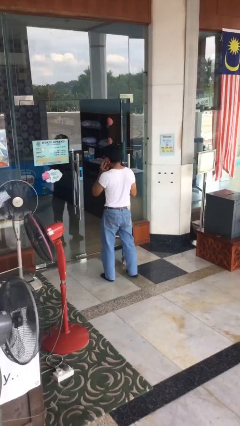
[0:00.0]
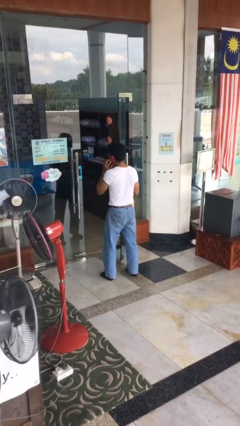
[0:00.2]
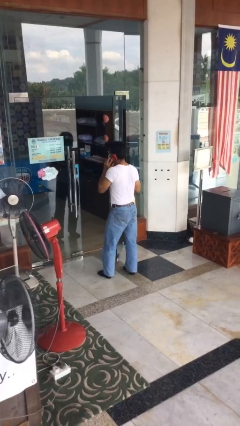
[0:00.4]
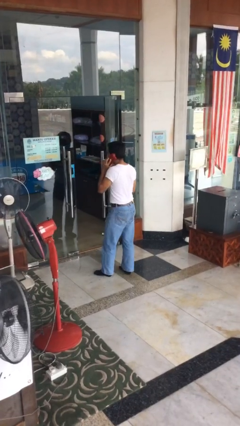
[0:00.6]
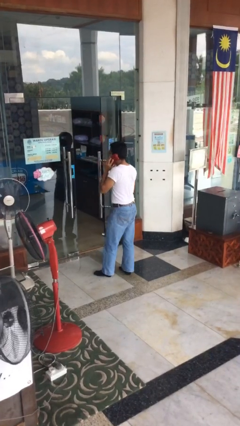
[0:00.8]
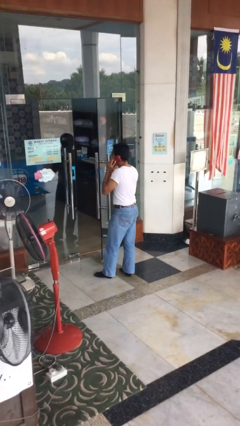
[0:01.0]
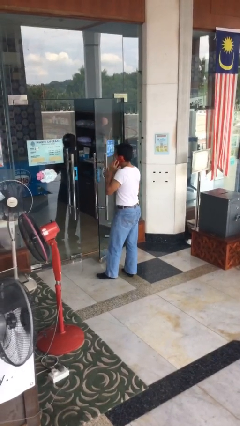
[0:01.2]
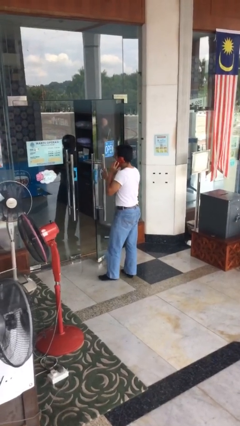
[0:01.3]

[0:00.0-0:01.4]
person closes facility door

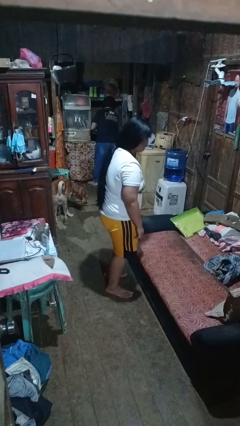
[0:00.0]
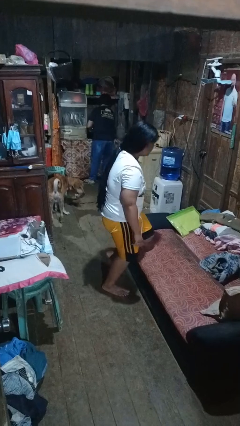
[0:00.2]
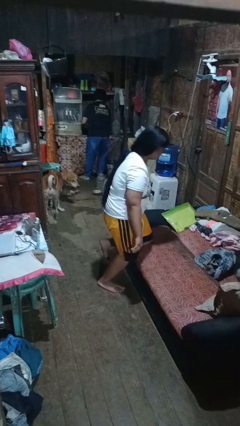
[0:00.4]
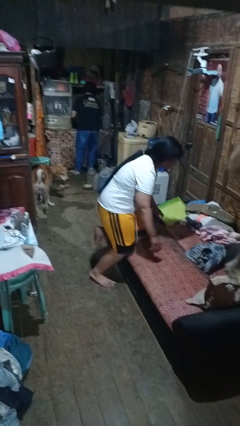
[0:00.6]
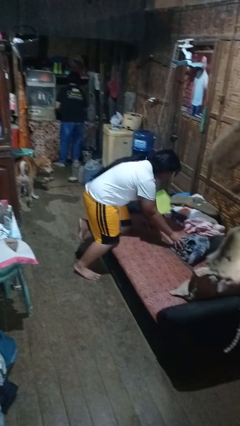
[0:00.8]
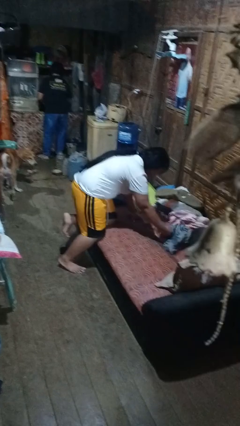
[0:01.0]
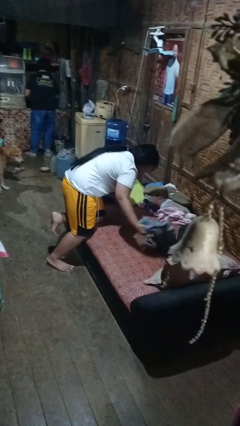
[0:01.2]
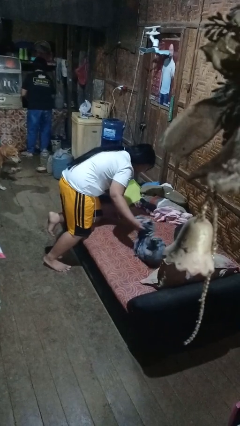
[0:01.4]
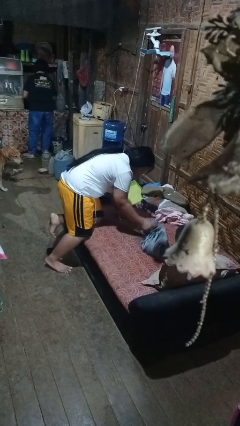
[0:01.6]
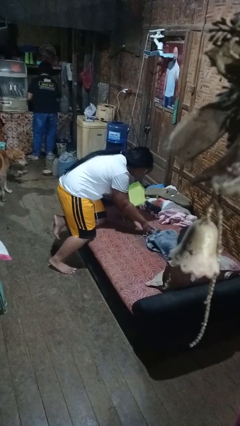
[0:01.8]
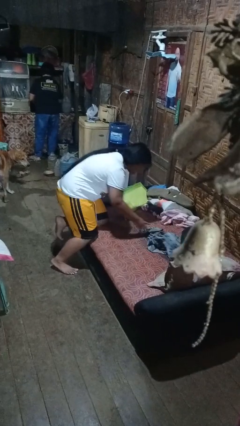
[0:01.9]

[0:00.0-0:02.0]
person searches in couch

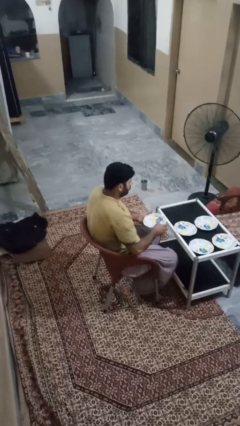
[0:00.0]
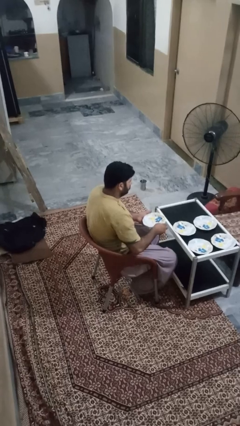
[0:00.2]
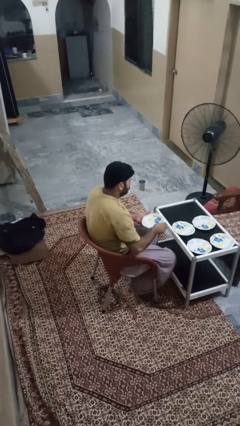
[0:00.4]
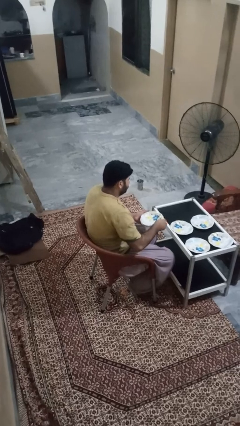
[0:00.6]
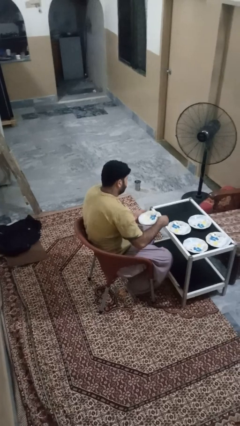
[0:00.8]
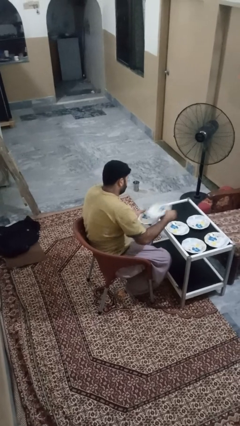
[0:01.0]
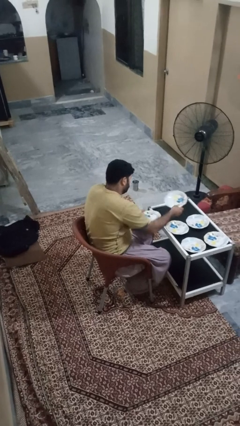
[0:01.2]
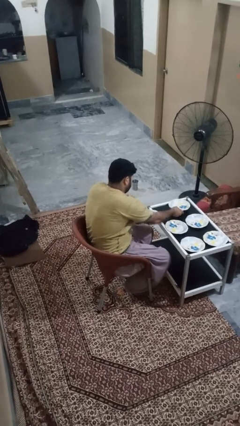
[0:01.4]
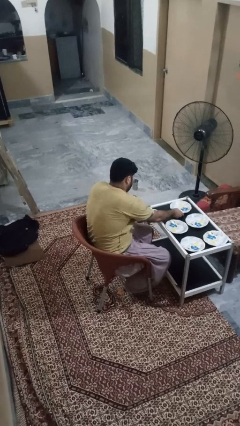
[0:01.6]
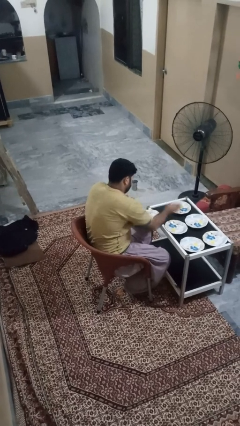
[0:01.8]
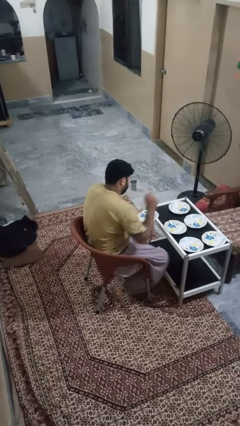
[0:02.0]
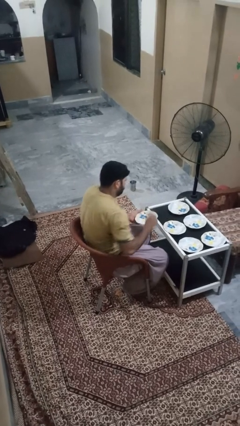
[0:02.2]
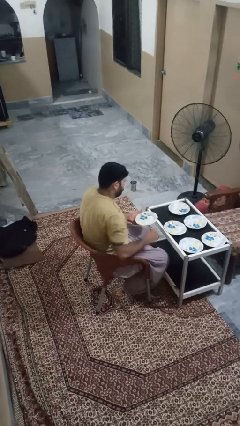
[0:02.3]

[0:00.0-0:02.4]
person sets table

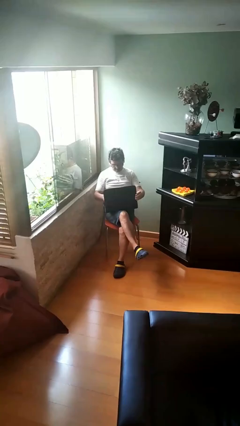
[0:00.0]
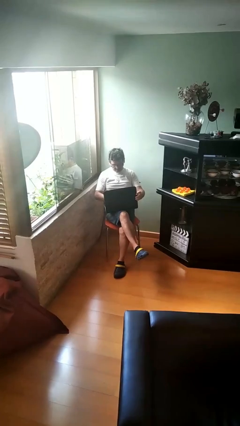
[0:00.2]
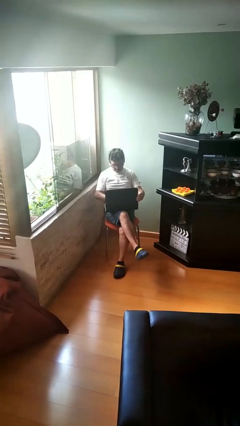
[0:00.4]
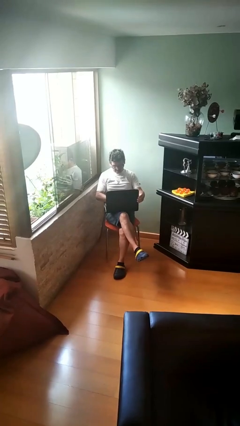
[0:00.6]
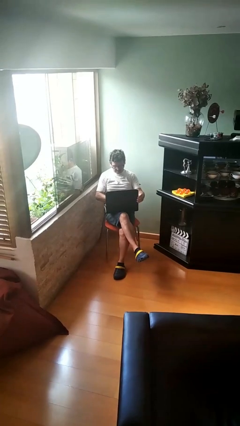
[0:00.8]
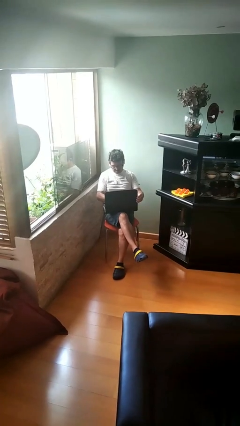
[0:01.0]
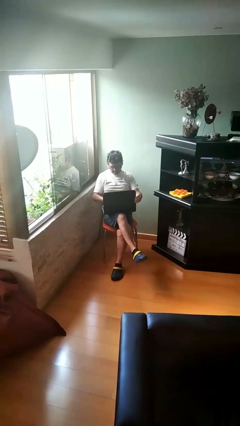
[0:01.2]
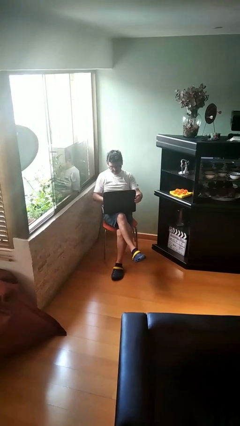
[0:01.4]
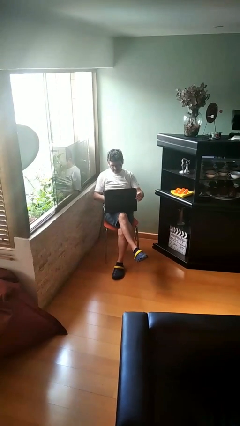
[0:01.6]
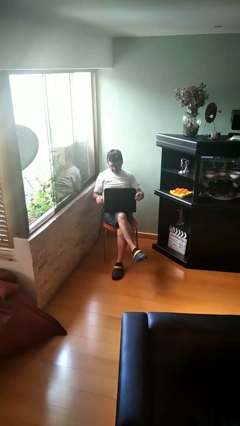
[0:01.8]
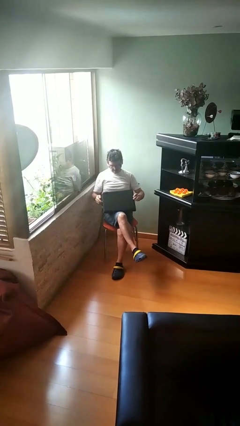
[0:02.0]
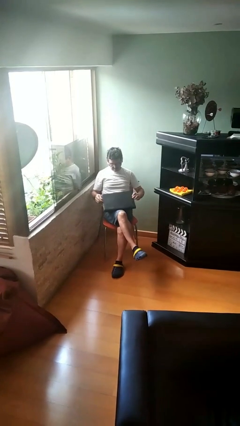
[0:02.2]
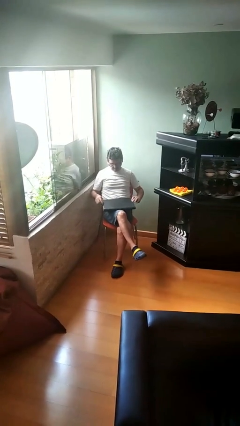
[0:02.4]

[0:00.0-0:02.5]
person interacts with laptop

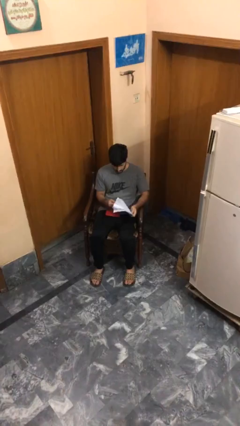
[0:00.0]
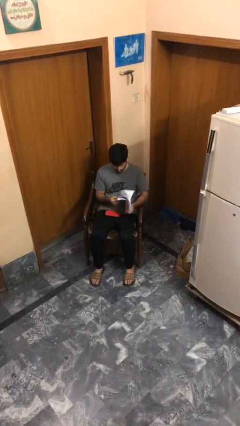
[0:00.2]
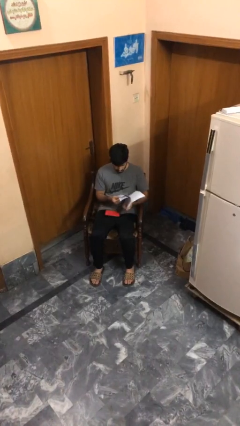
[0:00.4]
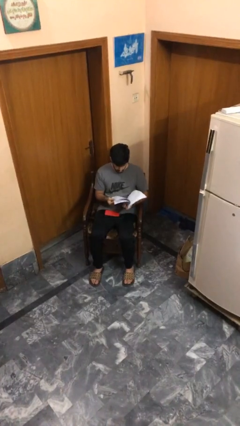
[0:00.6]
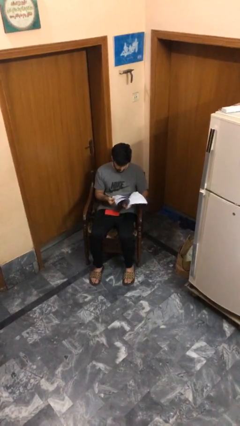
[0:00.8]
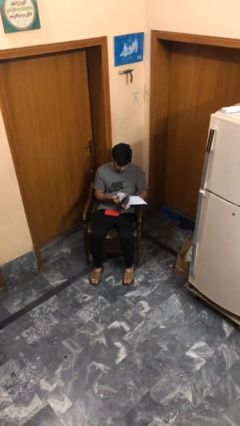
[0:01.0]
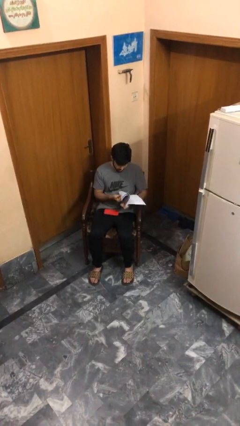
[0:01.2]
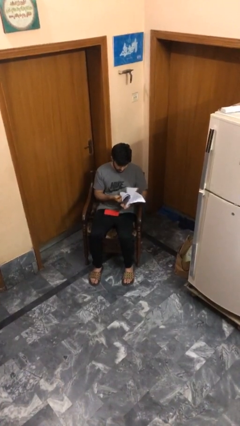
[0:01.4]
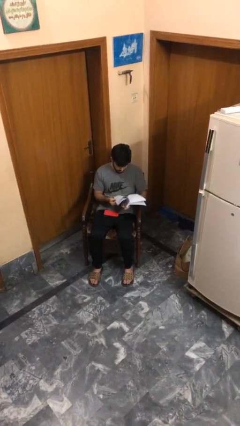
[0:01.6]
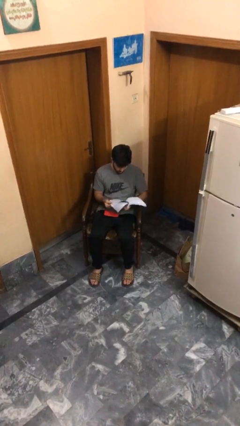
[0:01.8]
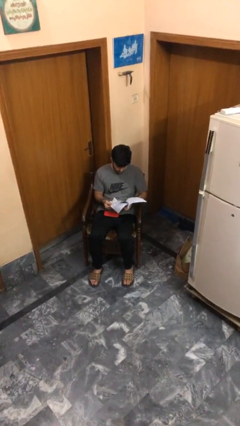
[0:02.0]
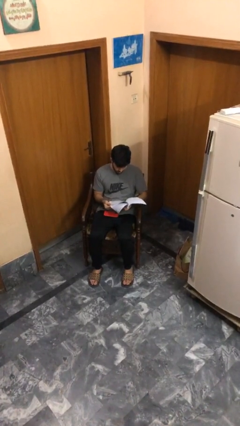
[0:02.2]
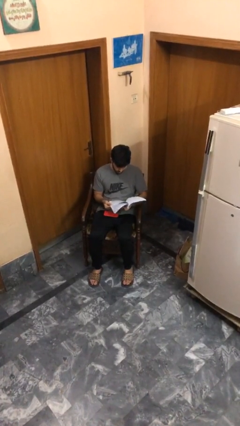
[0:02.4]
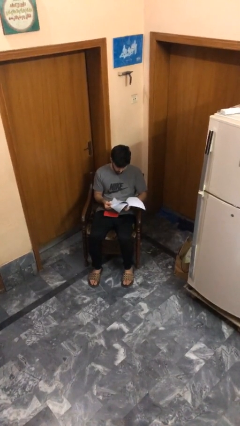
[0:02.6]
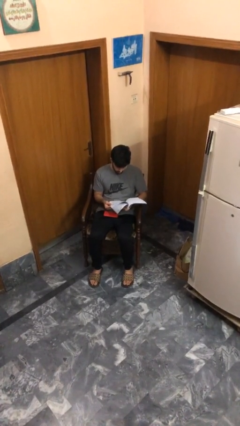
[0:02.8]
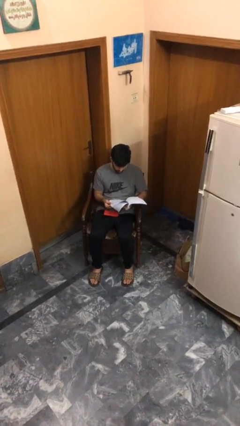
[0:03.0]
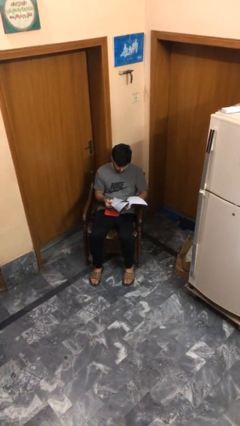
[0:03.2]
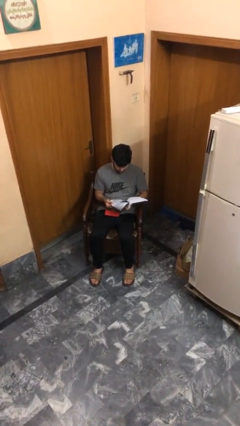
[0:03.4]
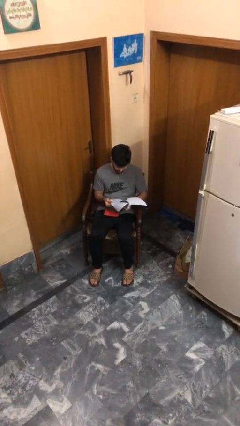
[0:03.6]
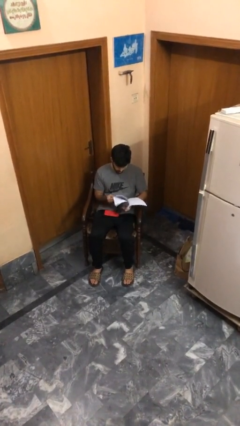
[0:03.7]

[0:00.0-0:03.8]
person reads magazine

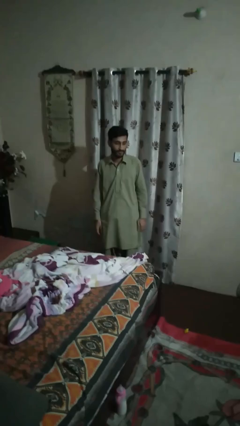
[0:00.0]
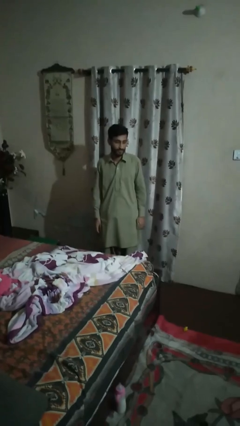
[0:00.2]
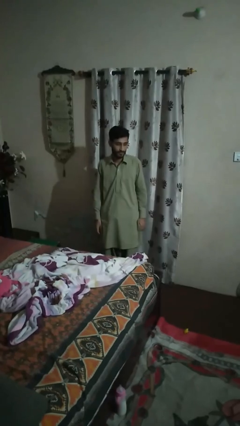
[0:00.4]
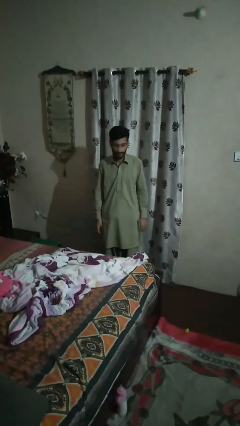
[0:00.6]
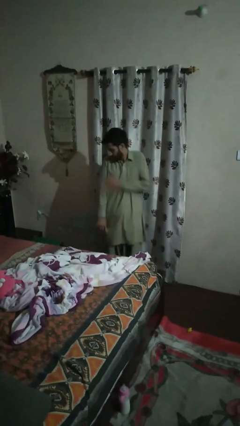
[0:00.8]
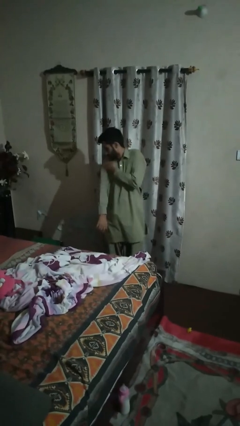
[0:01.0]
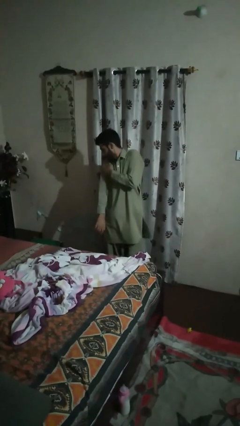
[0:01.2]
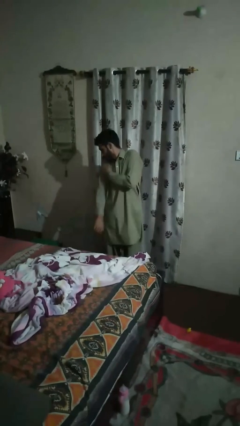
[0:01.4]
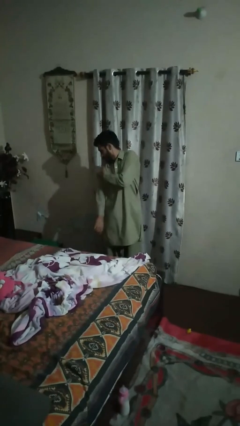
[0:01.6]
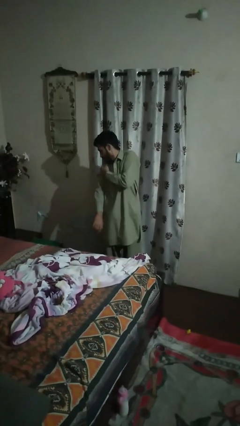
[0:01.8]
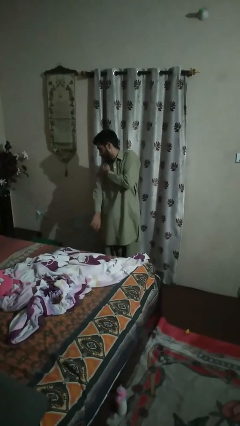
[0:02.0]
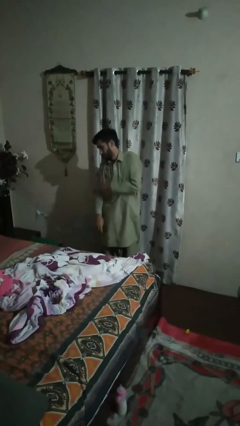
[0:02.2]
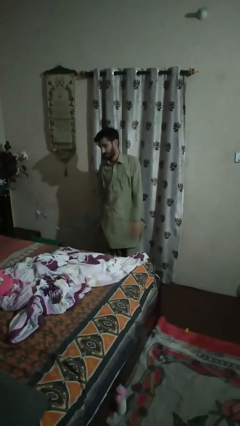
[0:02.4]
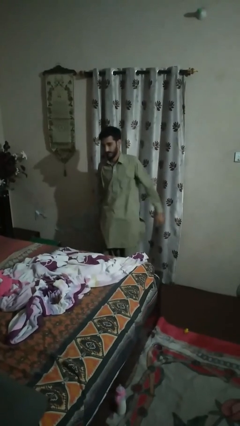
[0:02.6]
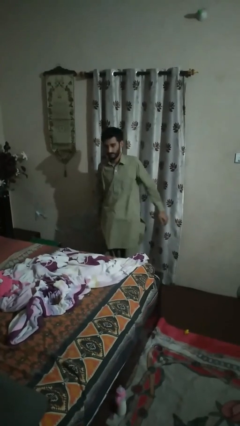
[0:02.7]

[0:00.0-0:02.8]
person swats bug

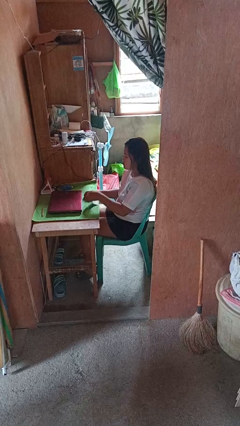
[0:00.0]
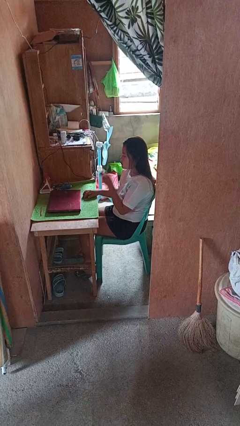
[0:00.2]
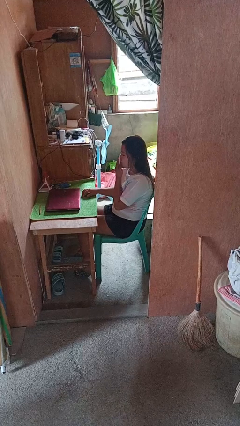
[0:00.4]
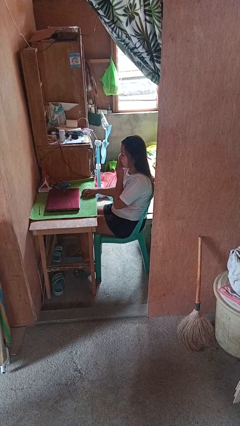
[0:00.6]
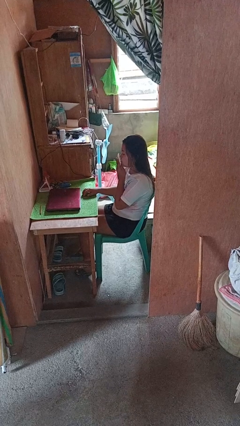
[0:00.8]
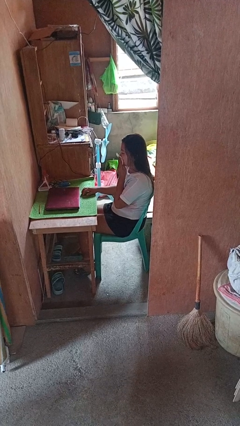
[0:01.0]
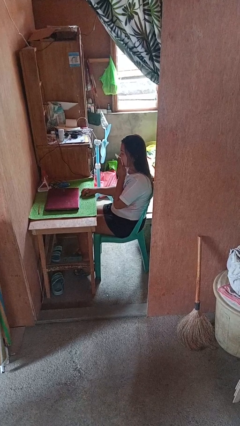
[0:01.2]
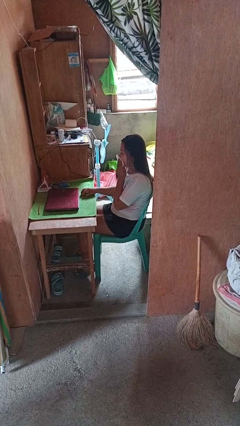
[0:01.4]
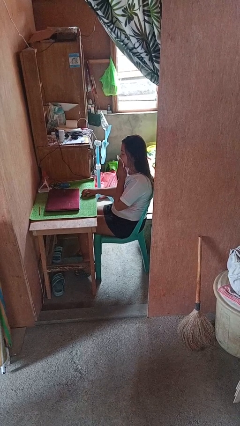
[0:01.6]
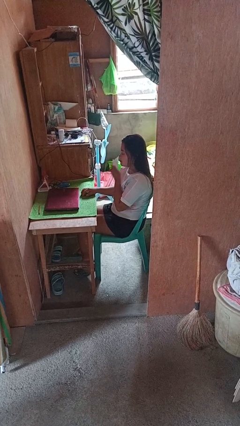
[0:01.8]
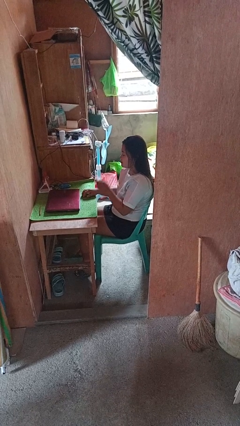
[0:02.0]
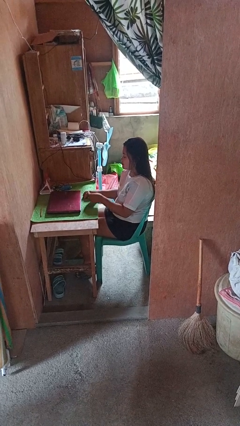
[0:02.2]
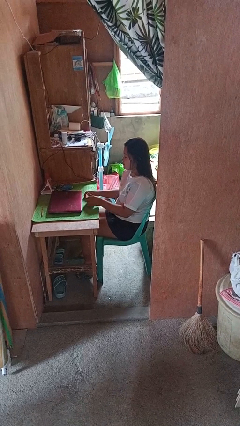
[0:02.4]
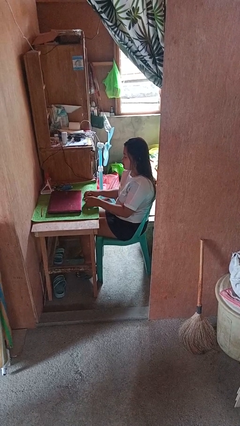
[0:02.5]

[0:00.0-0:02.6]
person wipes mouth with napkin
